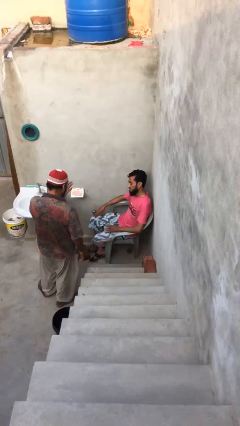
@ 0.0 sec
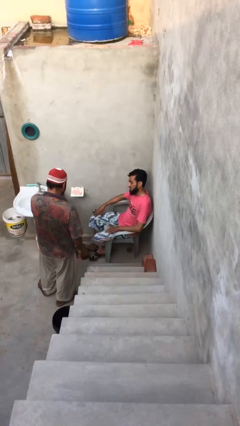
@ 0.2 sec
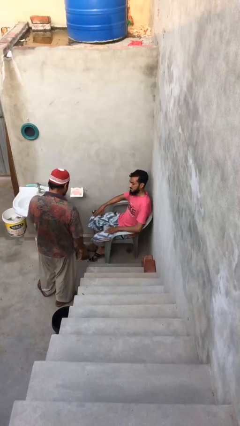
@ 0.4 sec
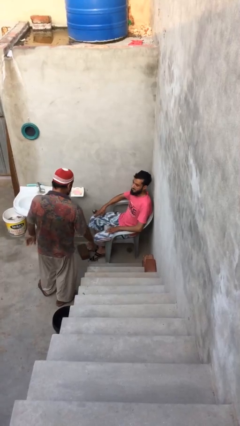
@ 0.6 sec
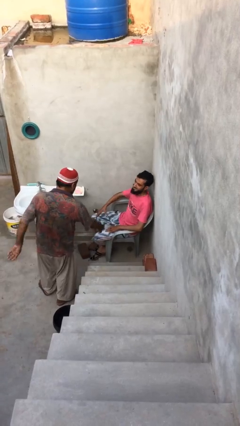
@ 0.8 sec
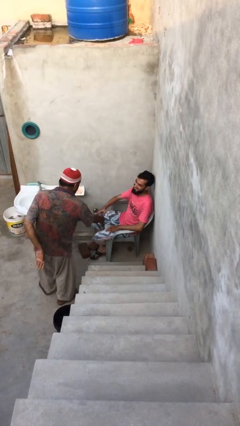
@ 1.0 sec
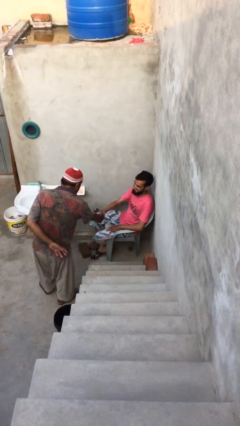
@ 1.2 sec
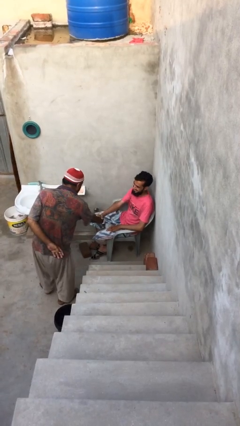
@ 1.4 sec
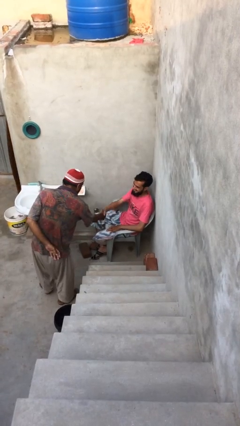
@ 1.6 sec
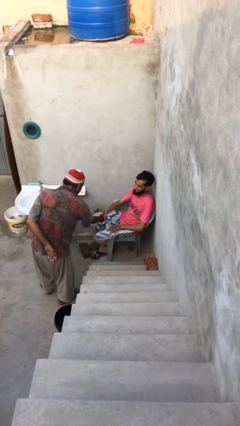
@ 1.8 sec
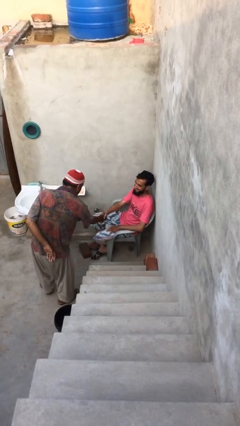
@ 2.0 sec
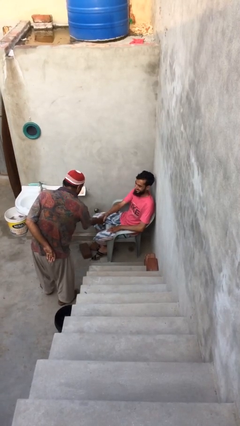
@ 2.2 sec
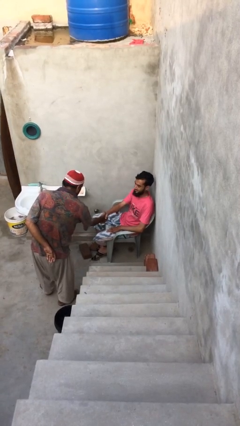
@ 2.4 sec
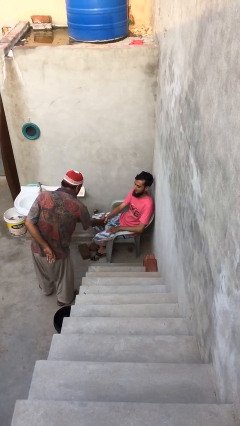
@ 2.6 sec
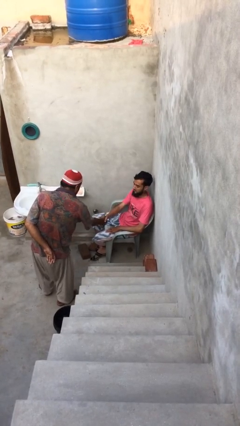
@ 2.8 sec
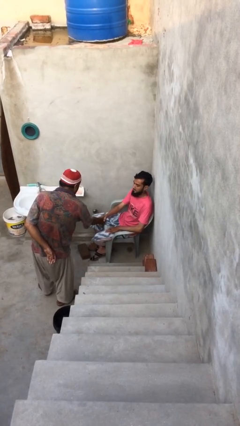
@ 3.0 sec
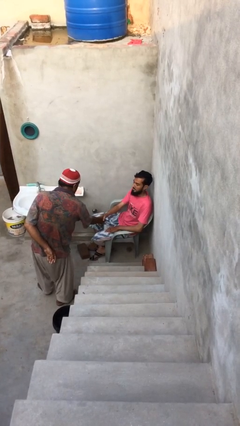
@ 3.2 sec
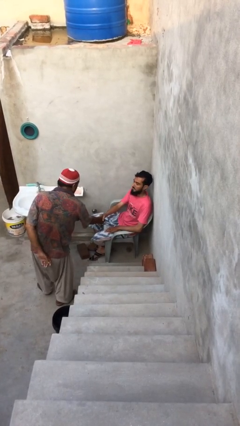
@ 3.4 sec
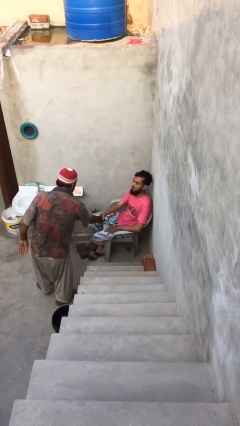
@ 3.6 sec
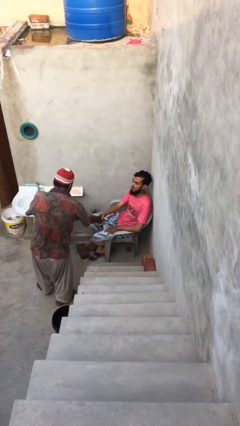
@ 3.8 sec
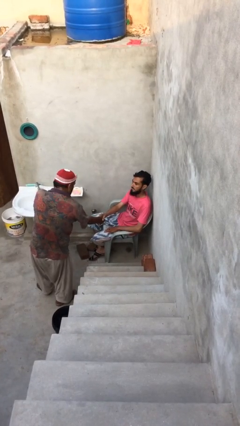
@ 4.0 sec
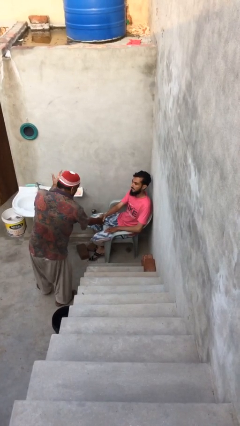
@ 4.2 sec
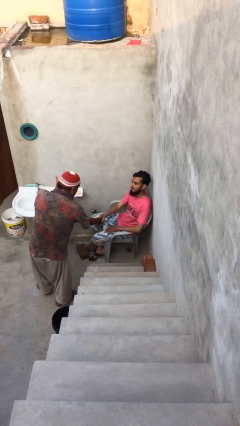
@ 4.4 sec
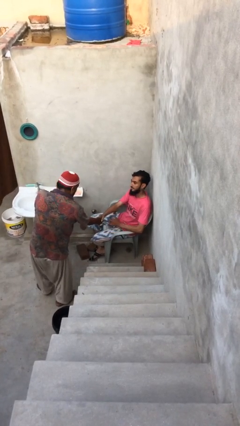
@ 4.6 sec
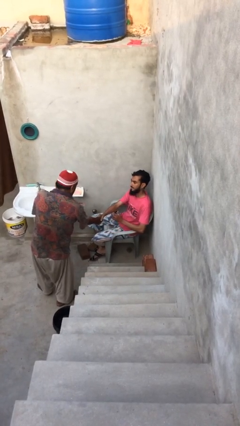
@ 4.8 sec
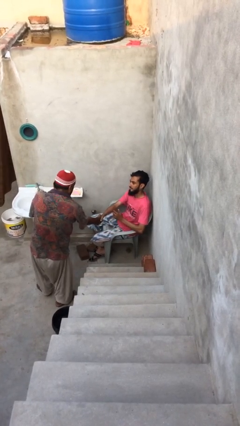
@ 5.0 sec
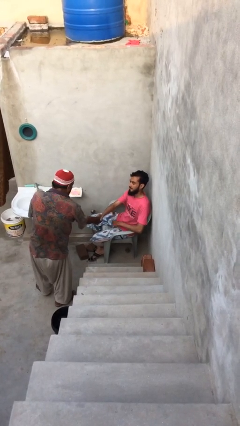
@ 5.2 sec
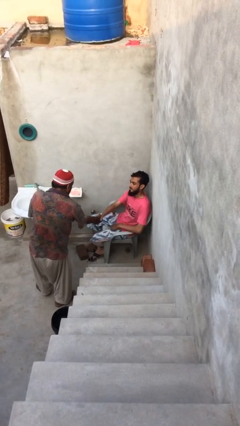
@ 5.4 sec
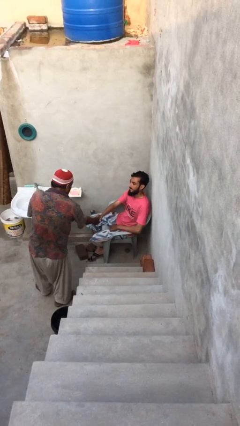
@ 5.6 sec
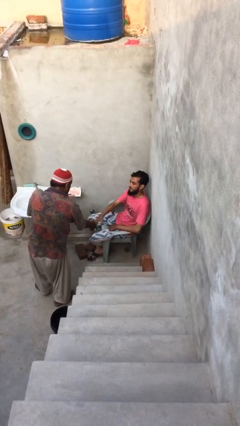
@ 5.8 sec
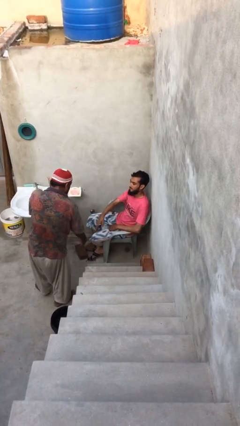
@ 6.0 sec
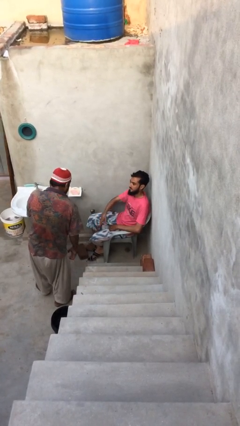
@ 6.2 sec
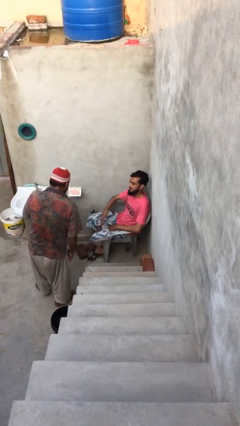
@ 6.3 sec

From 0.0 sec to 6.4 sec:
person shakes hand

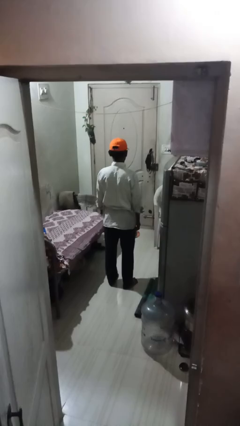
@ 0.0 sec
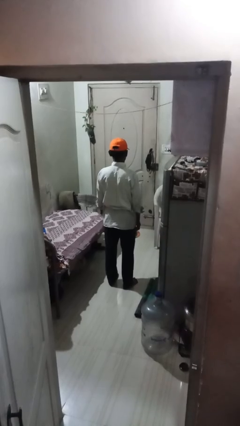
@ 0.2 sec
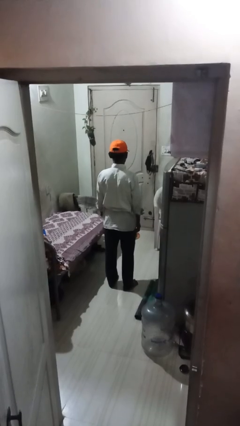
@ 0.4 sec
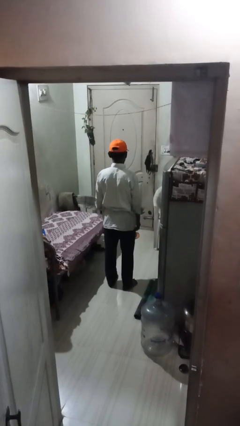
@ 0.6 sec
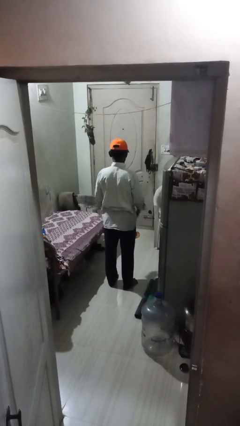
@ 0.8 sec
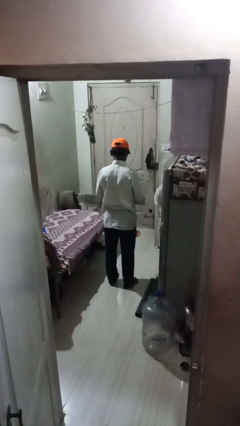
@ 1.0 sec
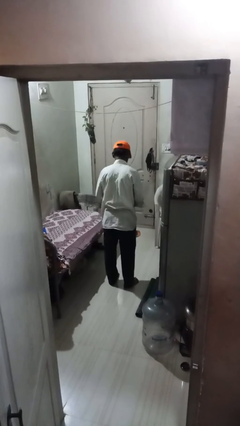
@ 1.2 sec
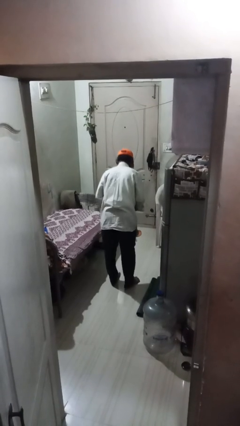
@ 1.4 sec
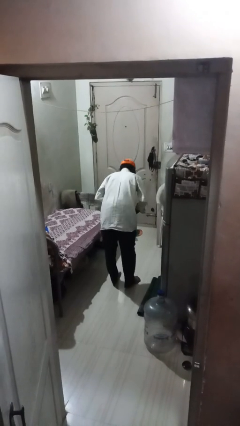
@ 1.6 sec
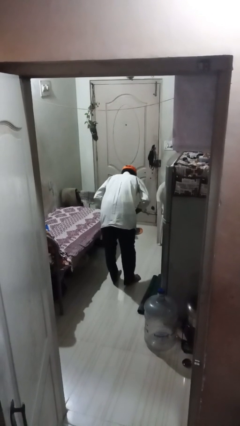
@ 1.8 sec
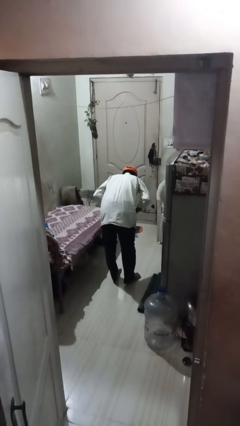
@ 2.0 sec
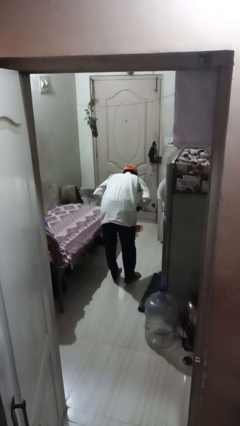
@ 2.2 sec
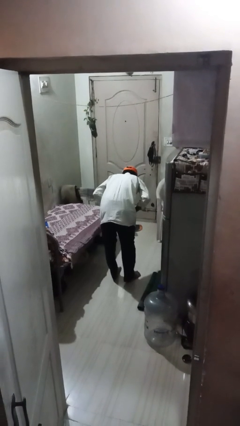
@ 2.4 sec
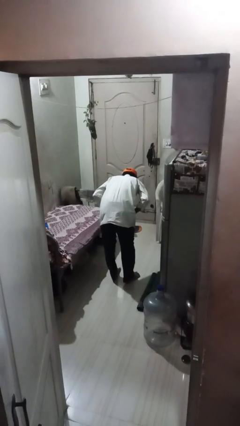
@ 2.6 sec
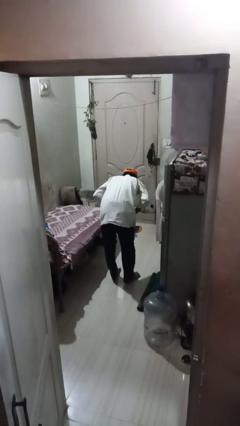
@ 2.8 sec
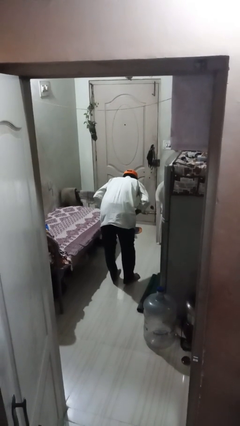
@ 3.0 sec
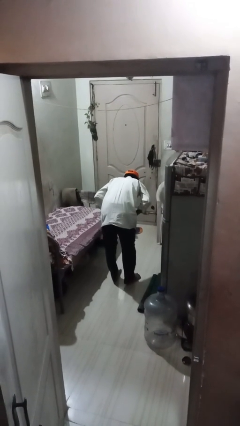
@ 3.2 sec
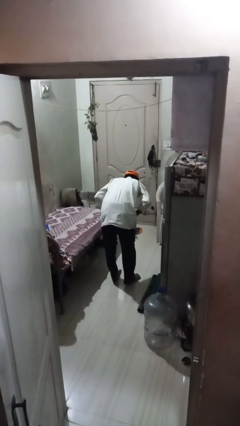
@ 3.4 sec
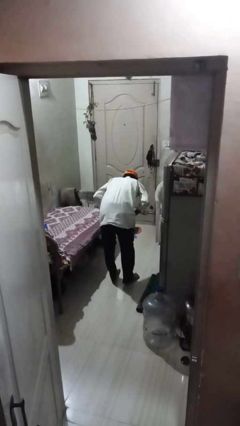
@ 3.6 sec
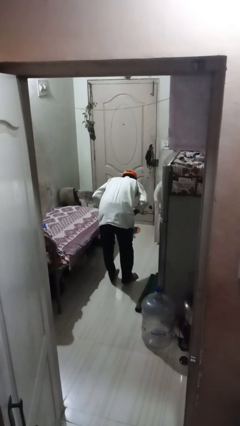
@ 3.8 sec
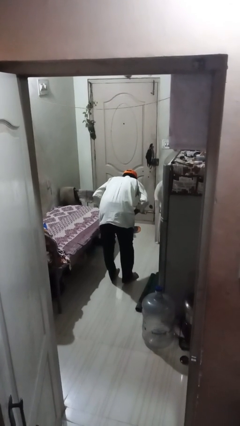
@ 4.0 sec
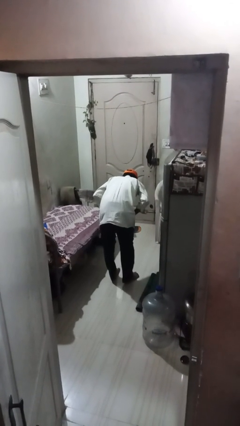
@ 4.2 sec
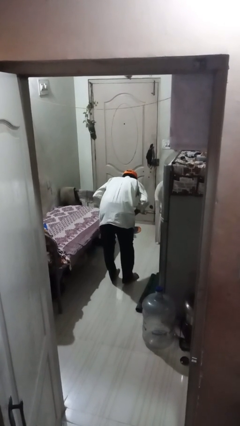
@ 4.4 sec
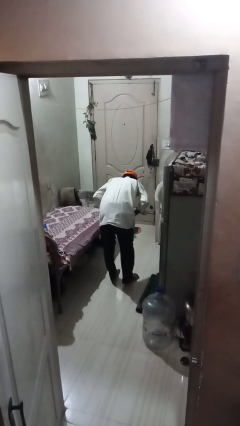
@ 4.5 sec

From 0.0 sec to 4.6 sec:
person bows

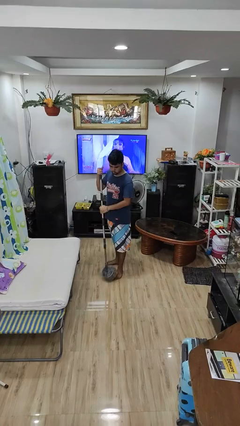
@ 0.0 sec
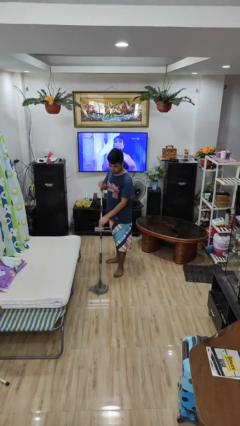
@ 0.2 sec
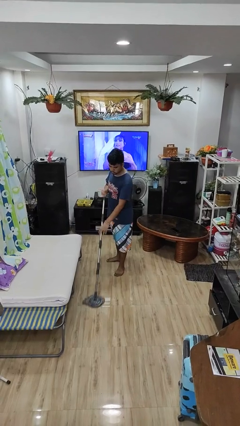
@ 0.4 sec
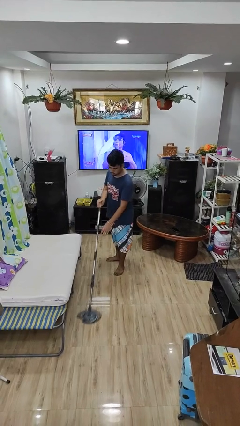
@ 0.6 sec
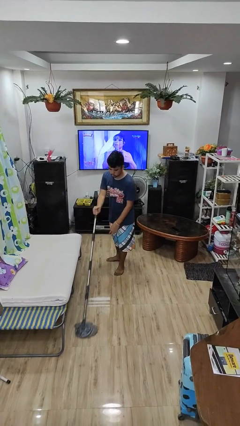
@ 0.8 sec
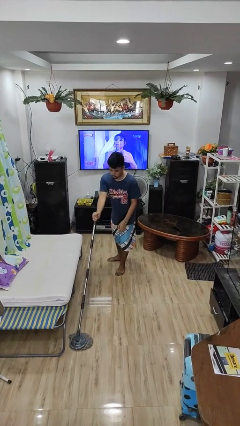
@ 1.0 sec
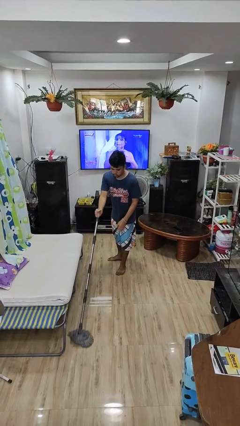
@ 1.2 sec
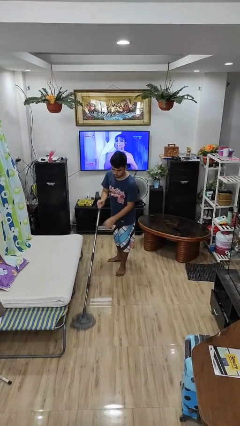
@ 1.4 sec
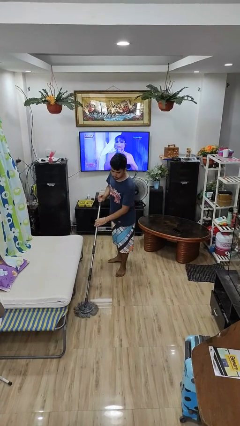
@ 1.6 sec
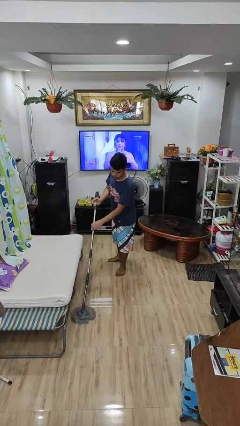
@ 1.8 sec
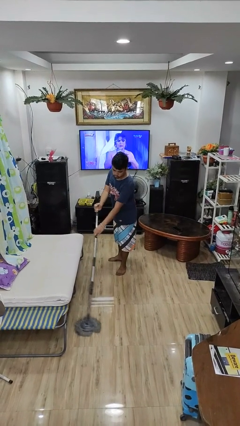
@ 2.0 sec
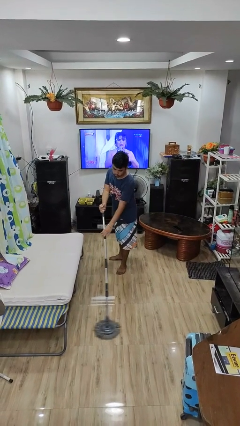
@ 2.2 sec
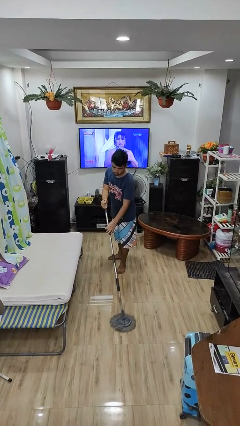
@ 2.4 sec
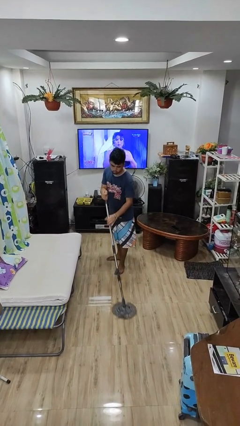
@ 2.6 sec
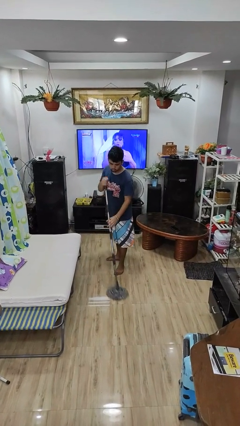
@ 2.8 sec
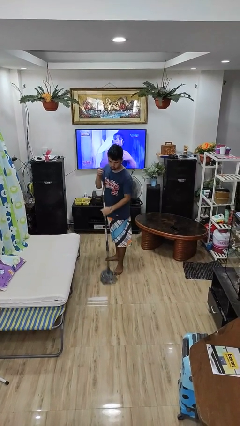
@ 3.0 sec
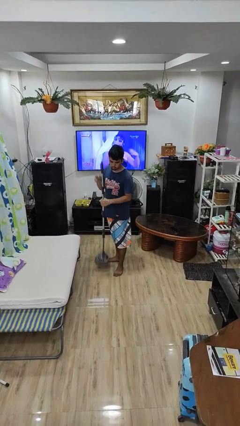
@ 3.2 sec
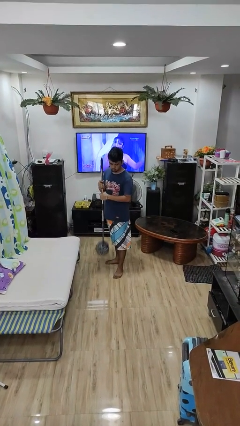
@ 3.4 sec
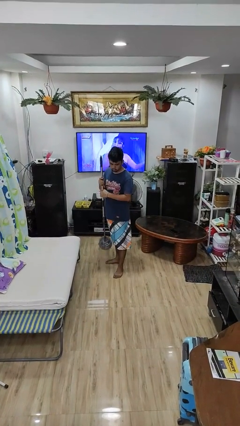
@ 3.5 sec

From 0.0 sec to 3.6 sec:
person mops

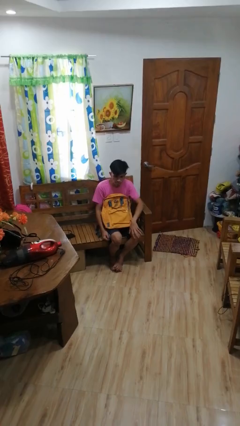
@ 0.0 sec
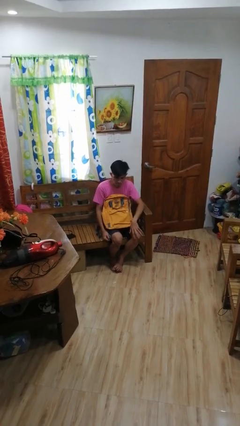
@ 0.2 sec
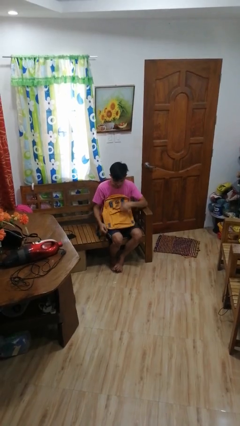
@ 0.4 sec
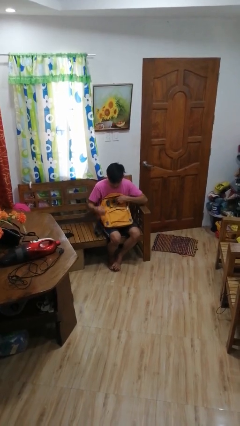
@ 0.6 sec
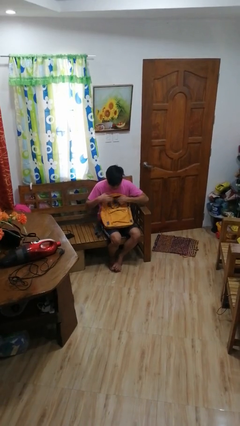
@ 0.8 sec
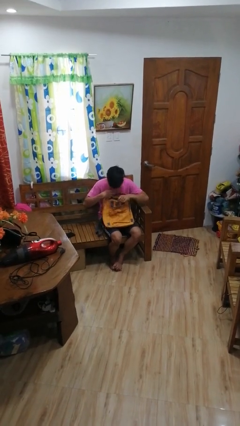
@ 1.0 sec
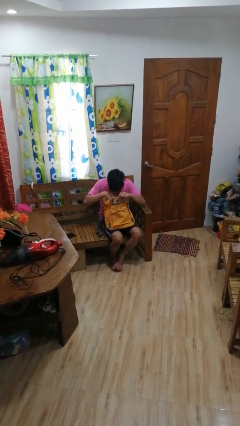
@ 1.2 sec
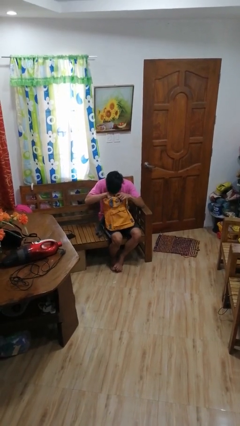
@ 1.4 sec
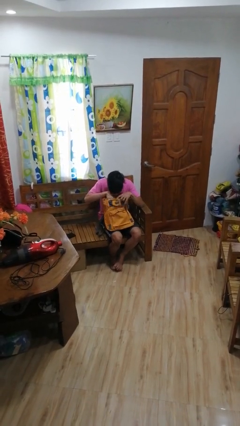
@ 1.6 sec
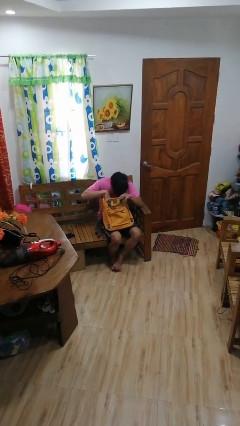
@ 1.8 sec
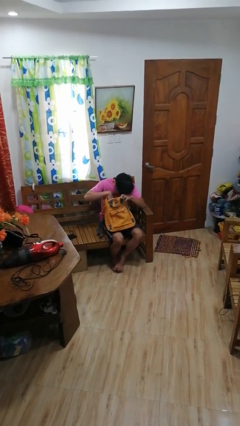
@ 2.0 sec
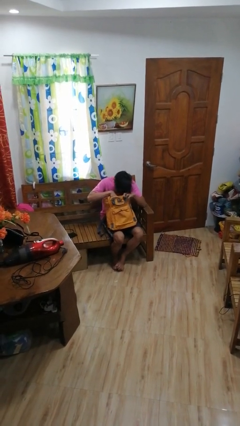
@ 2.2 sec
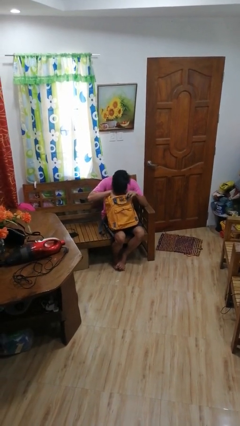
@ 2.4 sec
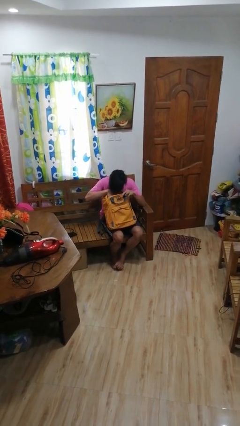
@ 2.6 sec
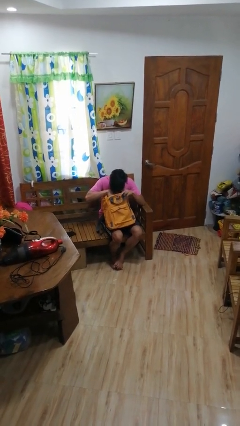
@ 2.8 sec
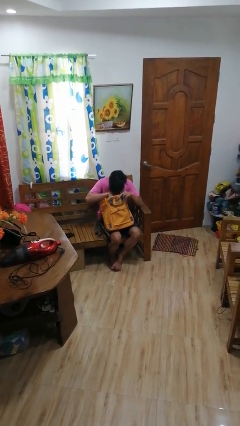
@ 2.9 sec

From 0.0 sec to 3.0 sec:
person searches in backpack
